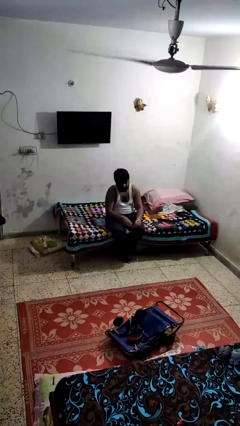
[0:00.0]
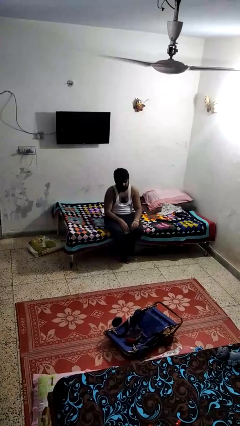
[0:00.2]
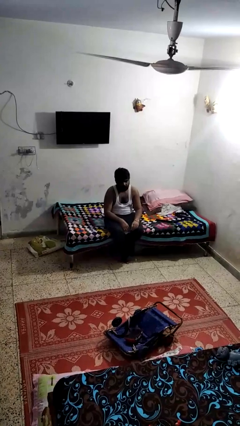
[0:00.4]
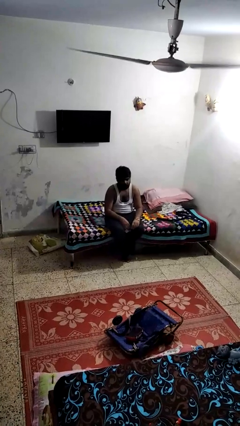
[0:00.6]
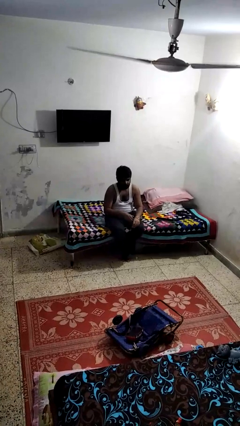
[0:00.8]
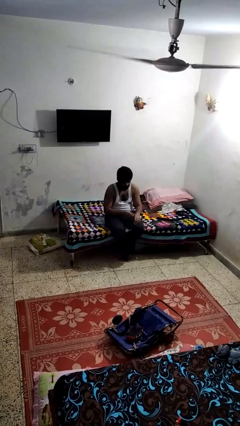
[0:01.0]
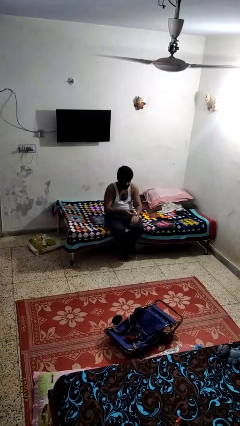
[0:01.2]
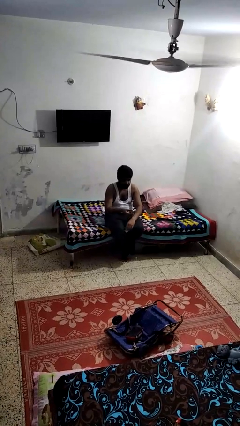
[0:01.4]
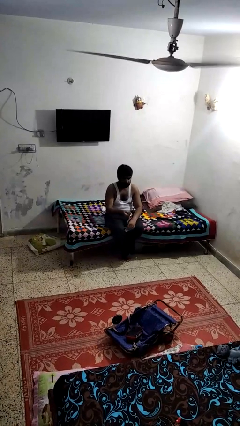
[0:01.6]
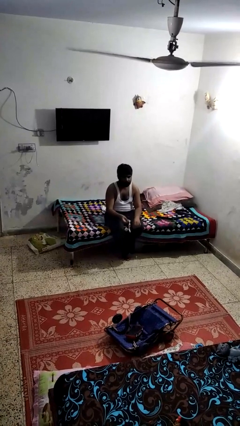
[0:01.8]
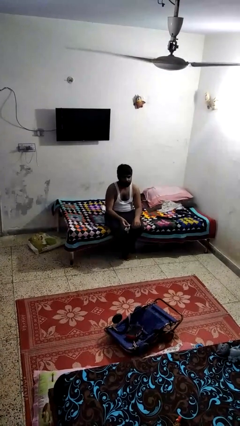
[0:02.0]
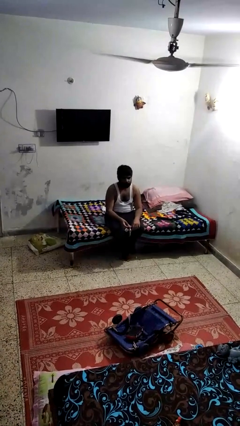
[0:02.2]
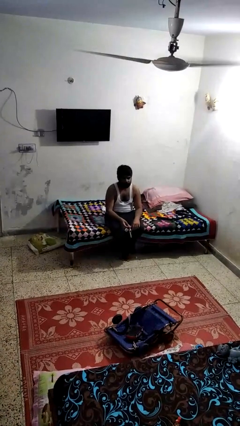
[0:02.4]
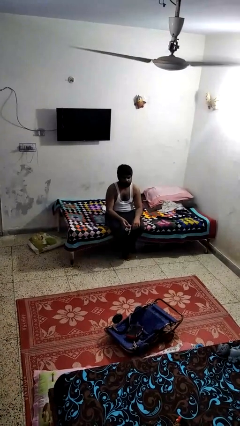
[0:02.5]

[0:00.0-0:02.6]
person takes off wristwatch

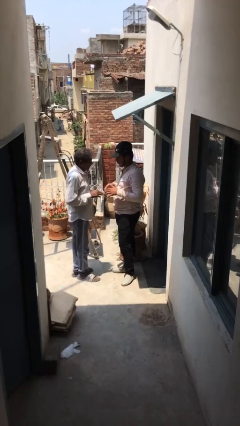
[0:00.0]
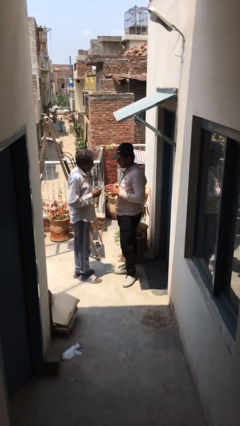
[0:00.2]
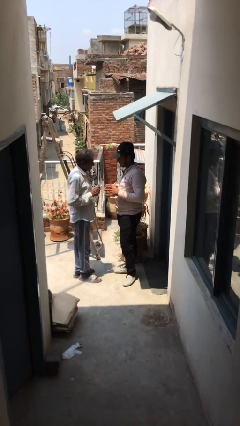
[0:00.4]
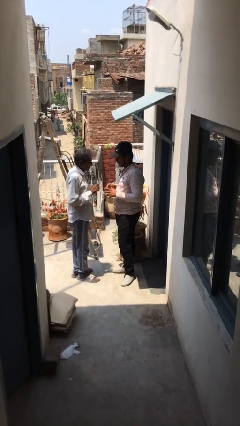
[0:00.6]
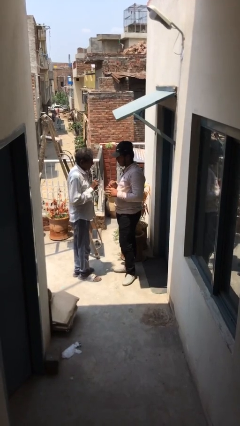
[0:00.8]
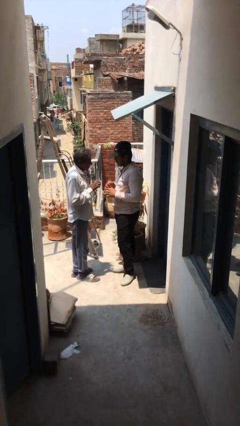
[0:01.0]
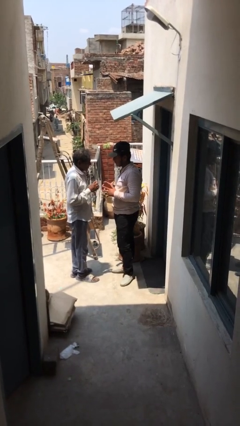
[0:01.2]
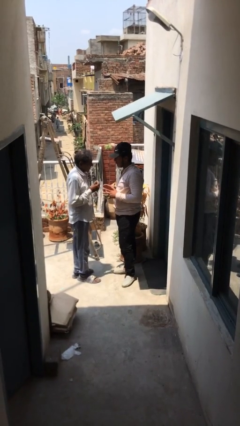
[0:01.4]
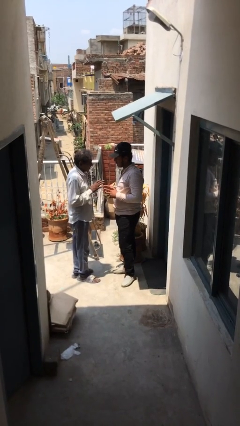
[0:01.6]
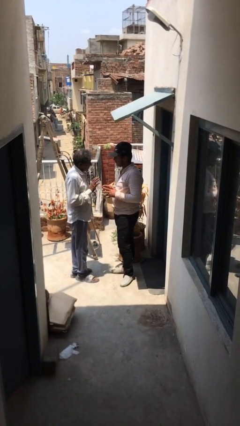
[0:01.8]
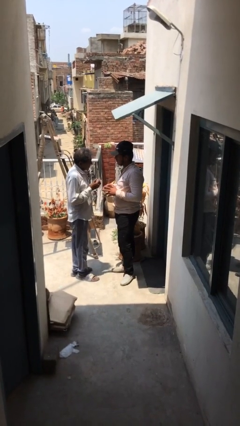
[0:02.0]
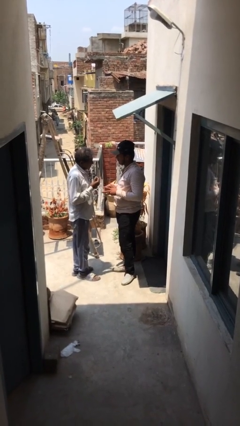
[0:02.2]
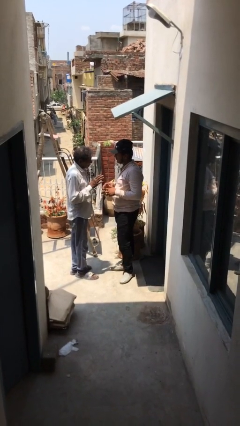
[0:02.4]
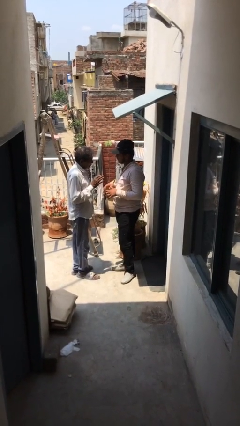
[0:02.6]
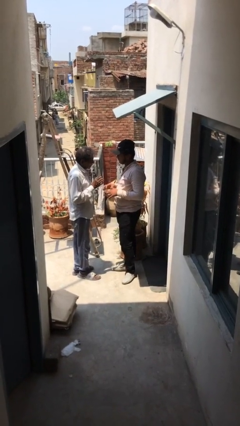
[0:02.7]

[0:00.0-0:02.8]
person talks to person

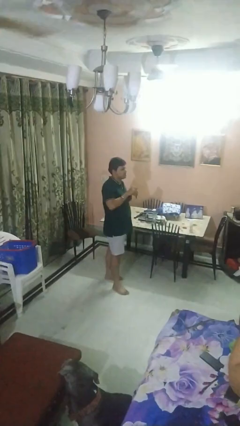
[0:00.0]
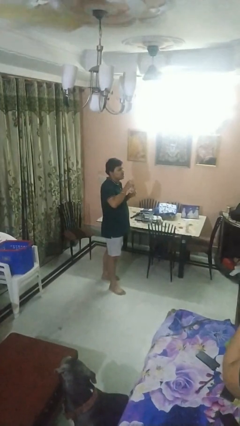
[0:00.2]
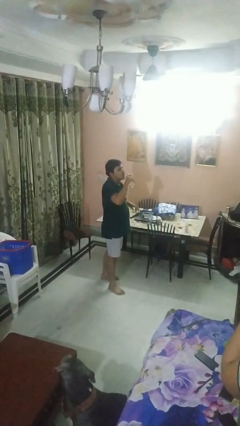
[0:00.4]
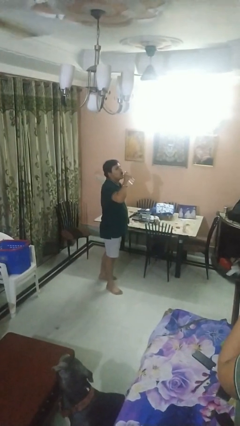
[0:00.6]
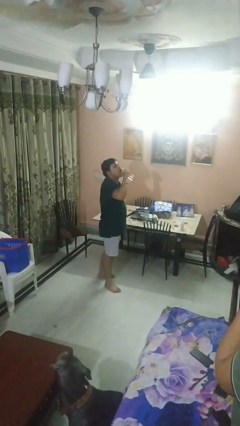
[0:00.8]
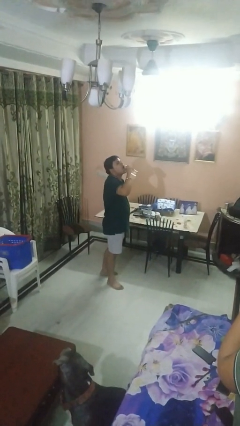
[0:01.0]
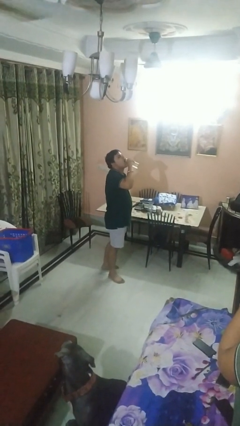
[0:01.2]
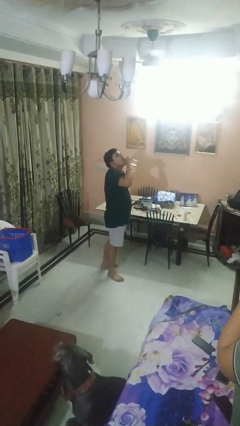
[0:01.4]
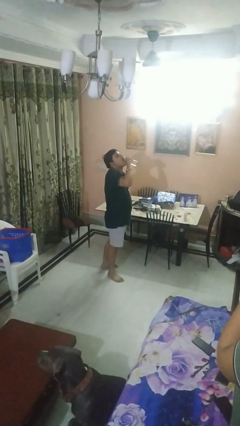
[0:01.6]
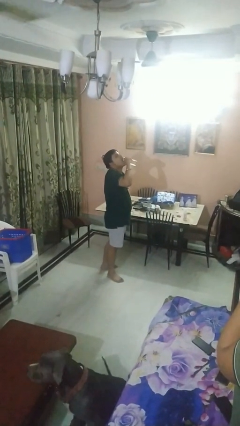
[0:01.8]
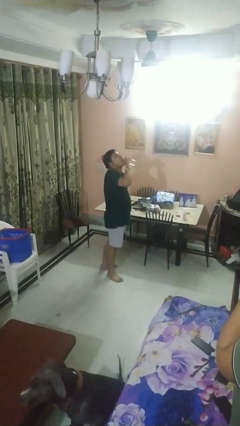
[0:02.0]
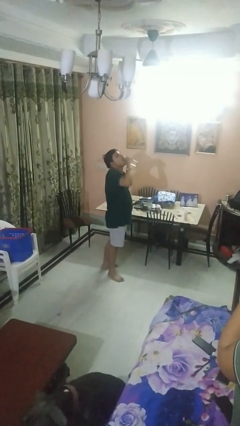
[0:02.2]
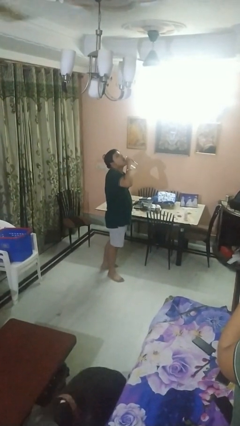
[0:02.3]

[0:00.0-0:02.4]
person drinks from bottle

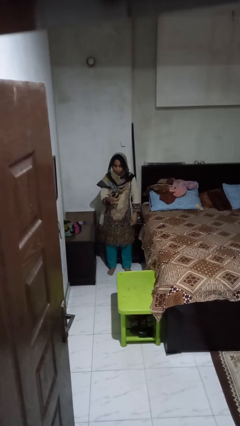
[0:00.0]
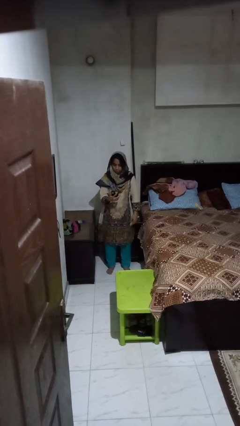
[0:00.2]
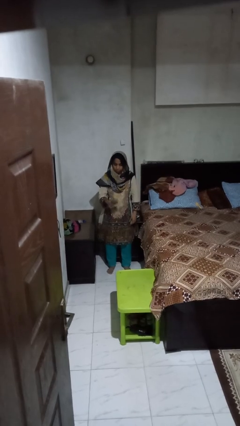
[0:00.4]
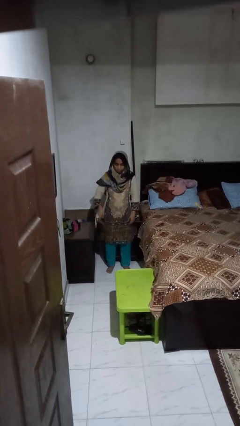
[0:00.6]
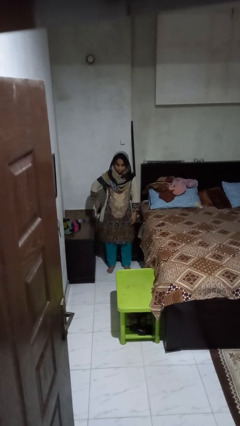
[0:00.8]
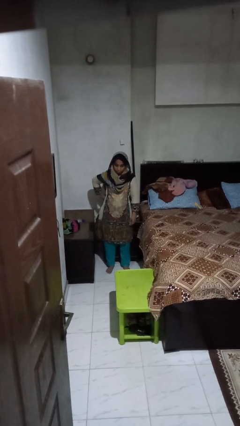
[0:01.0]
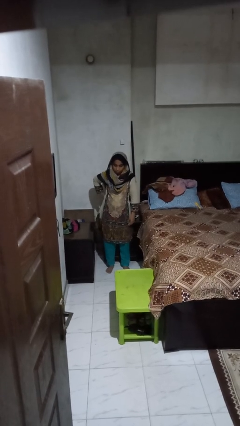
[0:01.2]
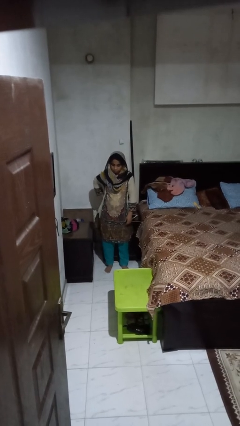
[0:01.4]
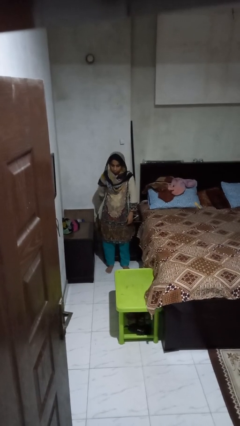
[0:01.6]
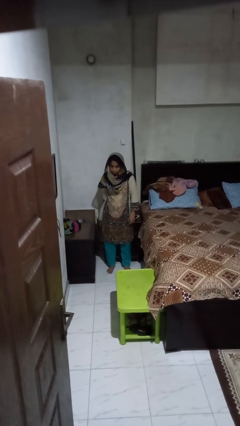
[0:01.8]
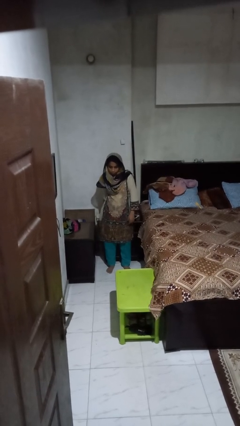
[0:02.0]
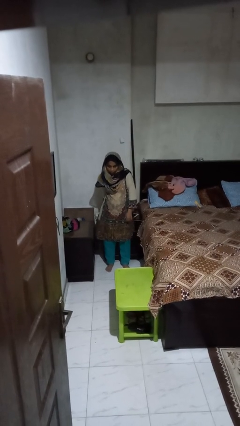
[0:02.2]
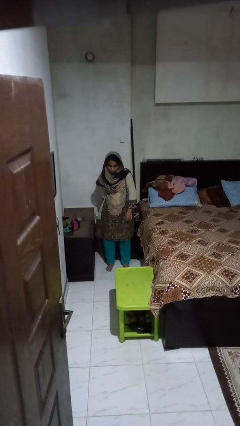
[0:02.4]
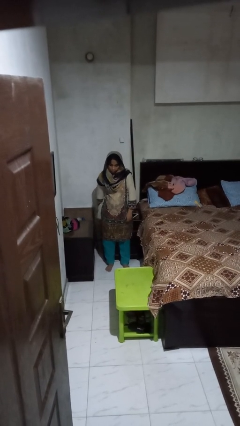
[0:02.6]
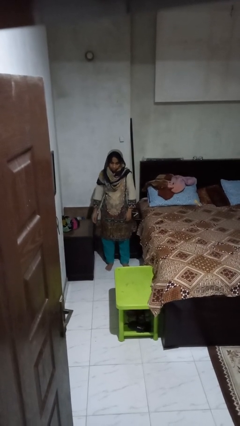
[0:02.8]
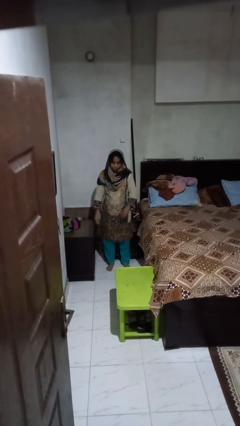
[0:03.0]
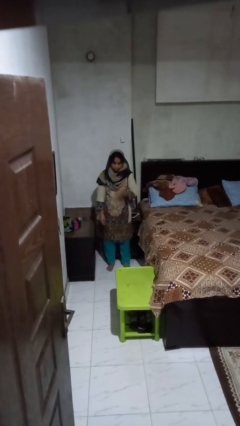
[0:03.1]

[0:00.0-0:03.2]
person puts phone into pocket

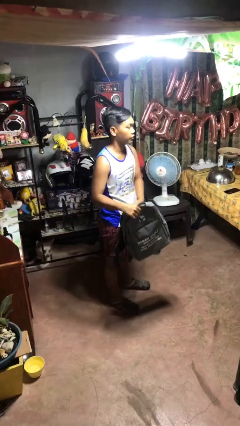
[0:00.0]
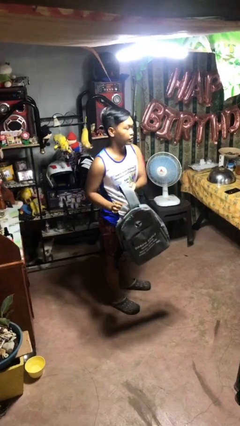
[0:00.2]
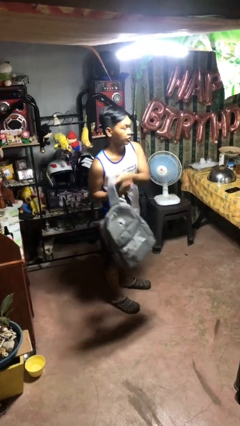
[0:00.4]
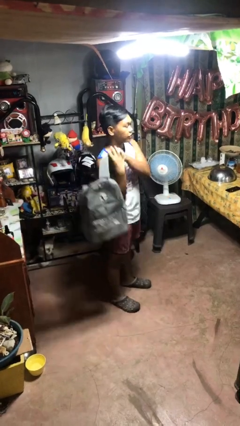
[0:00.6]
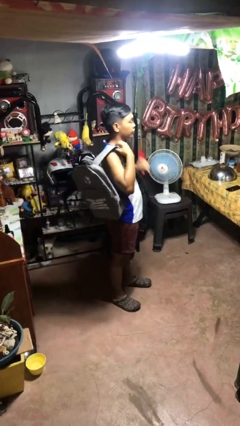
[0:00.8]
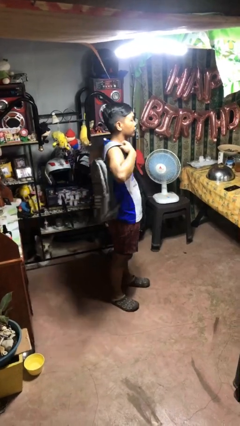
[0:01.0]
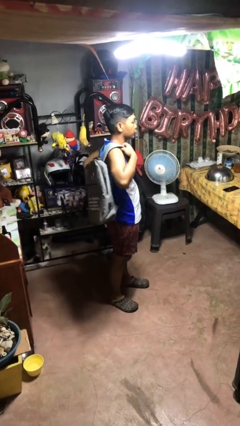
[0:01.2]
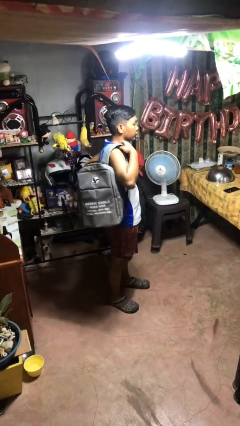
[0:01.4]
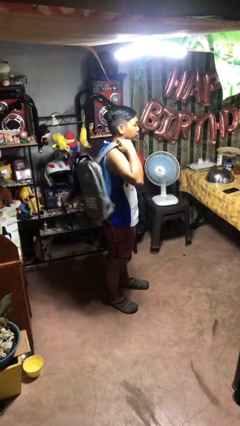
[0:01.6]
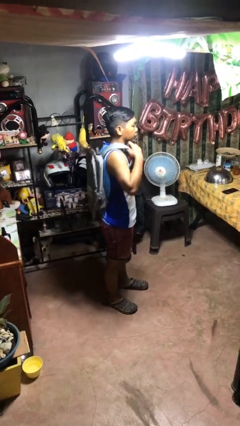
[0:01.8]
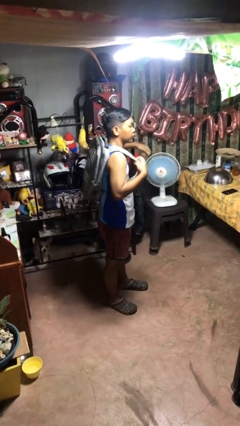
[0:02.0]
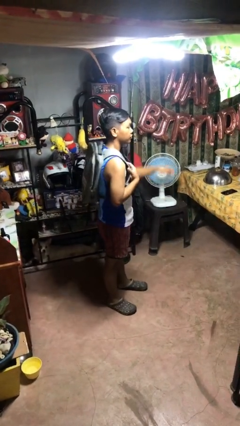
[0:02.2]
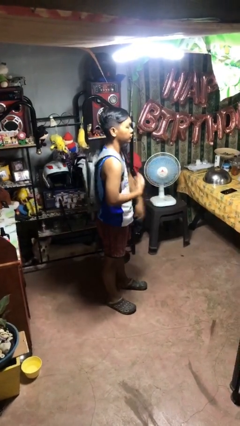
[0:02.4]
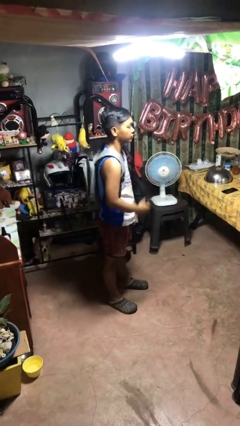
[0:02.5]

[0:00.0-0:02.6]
person puts on backpack

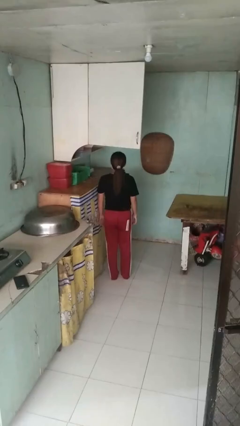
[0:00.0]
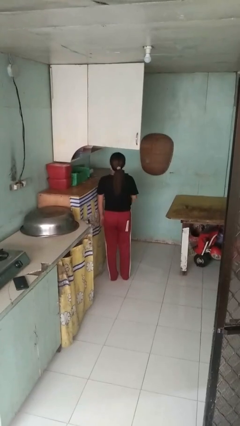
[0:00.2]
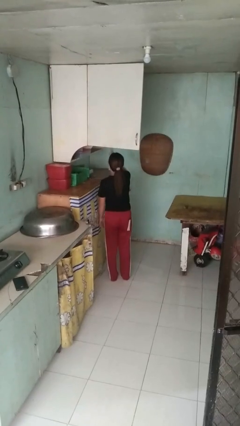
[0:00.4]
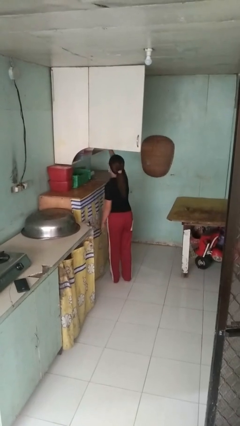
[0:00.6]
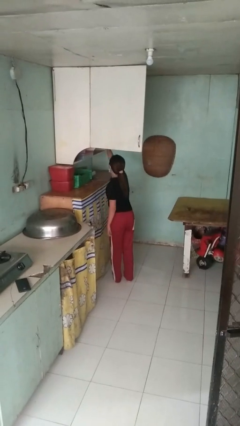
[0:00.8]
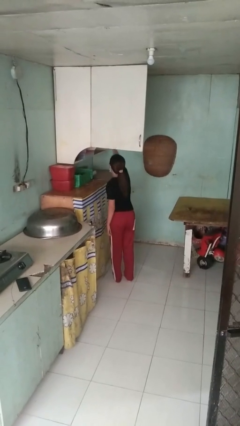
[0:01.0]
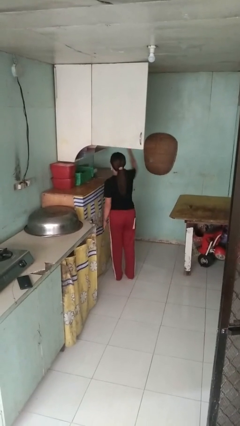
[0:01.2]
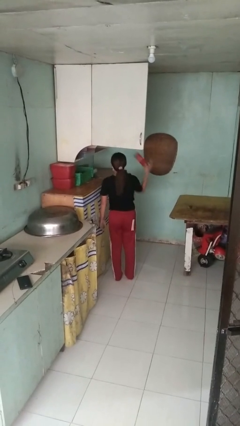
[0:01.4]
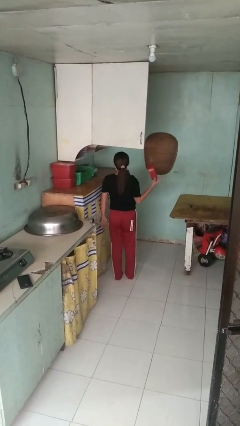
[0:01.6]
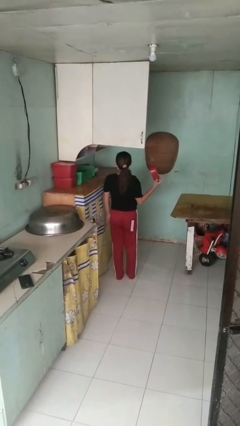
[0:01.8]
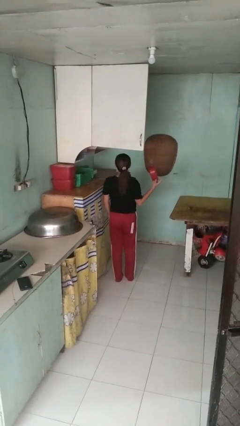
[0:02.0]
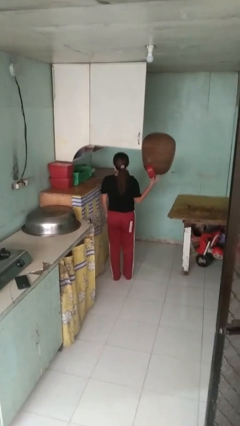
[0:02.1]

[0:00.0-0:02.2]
person takes object from cabinet

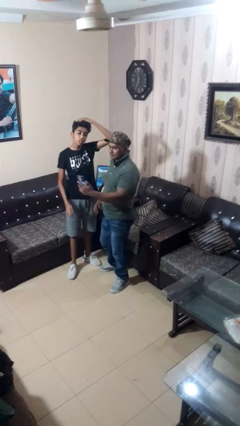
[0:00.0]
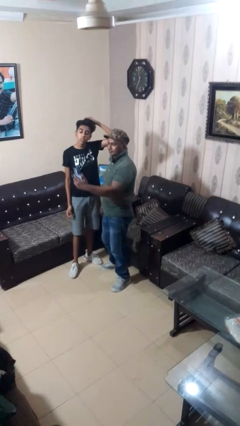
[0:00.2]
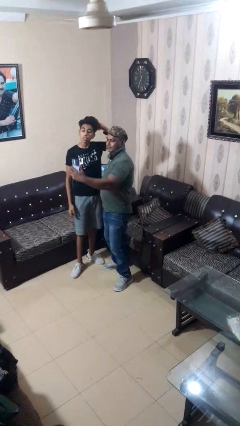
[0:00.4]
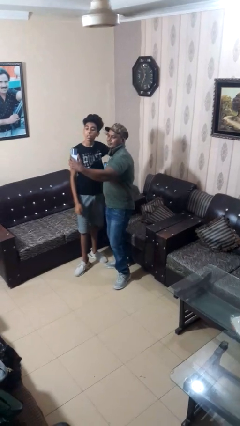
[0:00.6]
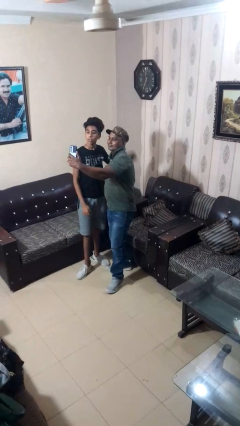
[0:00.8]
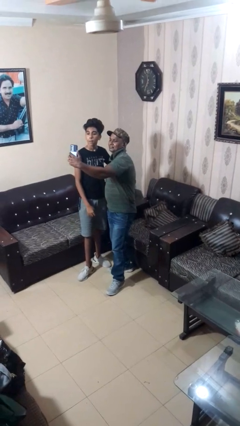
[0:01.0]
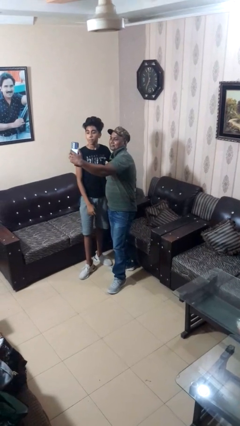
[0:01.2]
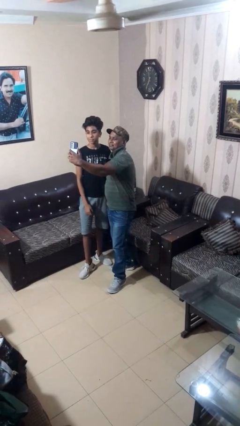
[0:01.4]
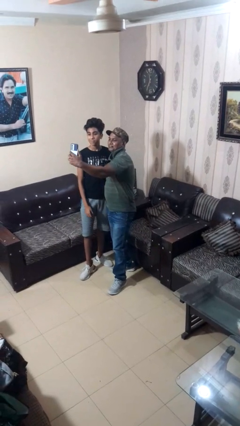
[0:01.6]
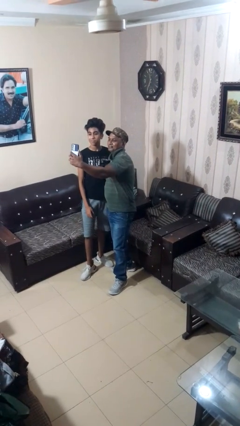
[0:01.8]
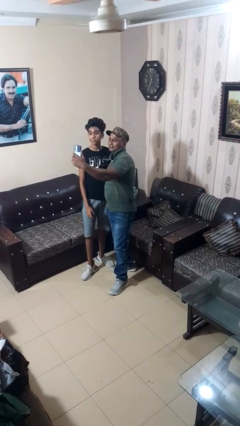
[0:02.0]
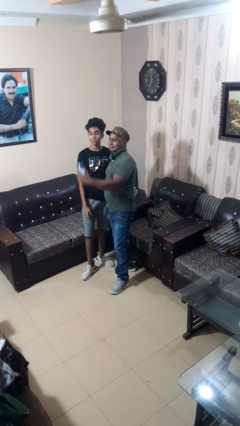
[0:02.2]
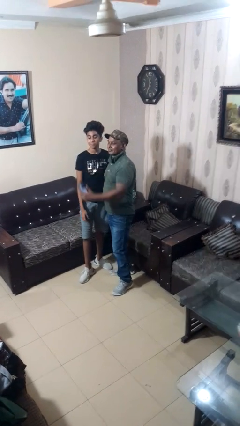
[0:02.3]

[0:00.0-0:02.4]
person takes selfie with person
